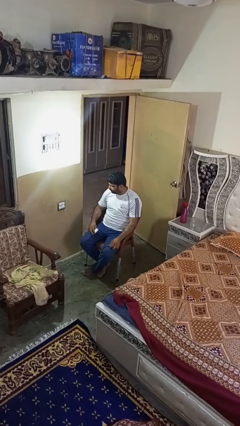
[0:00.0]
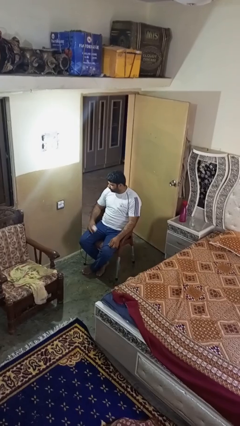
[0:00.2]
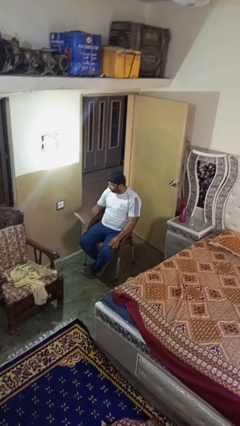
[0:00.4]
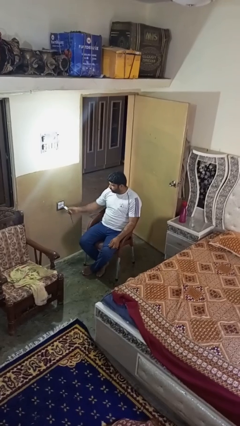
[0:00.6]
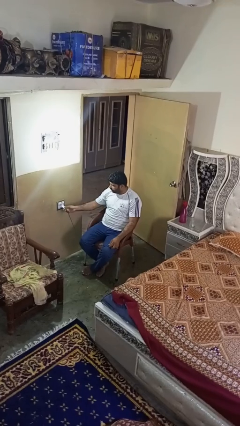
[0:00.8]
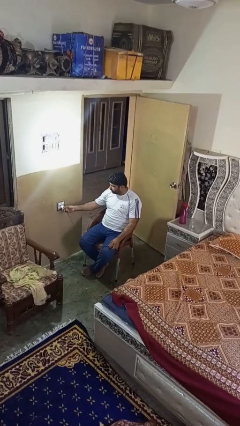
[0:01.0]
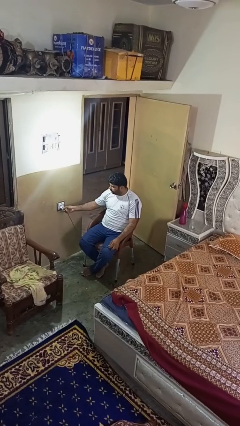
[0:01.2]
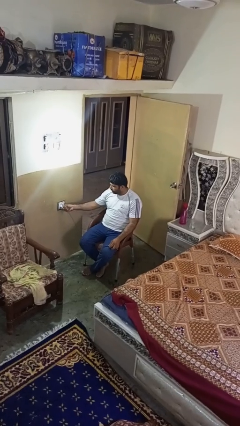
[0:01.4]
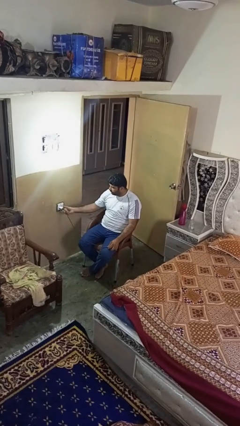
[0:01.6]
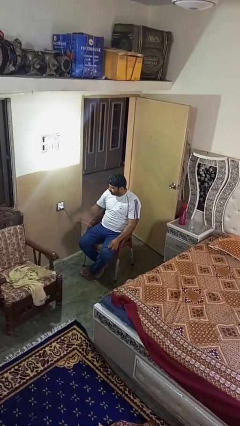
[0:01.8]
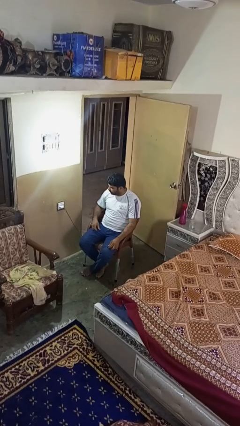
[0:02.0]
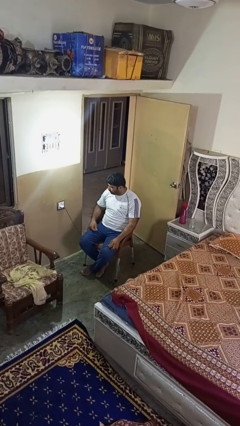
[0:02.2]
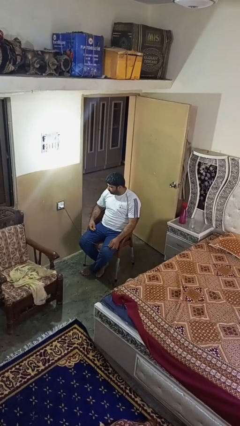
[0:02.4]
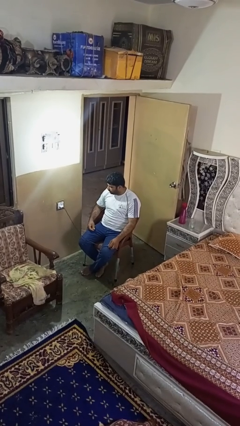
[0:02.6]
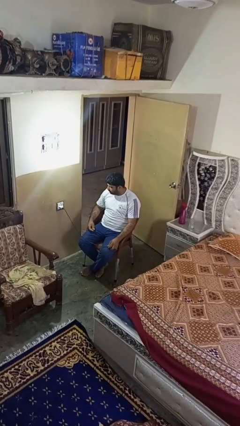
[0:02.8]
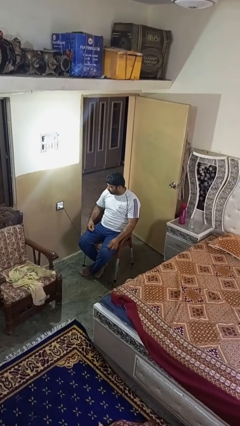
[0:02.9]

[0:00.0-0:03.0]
person plugs into electrical socket

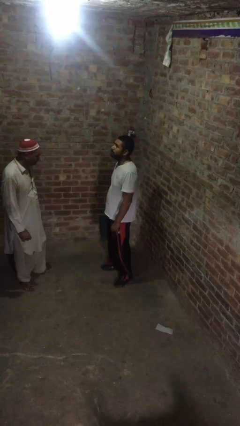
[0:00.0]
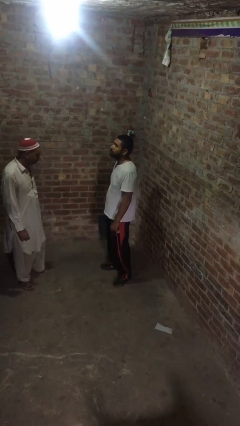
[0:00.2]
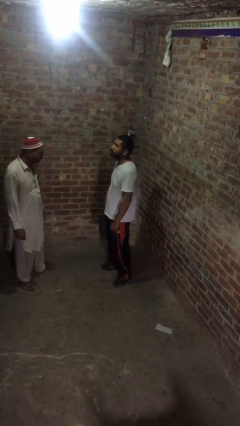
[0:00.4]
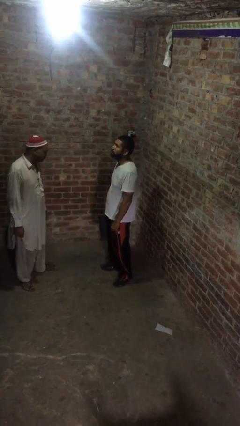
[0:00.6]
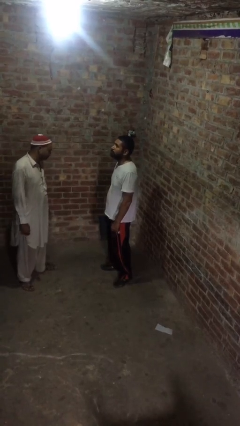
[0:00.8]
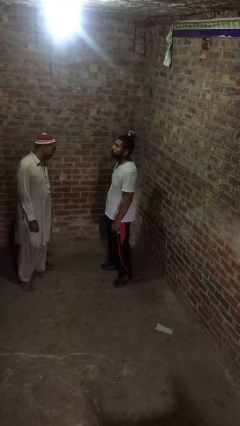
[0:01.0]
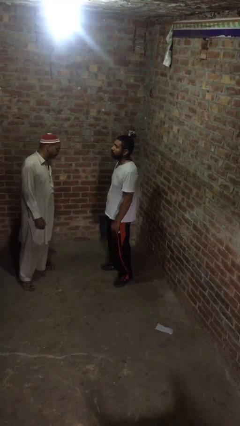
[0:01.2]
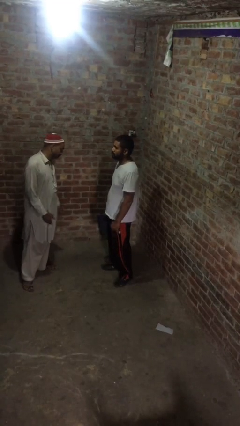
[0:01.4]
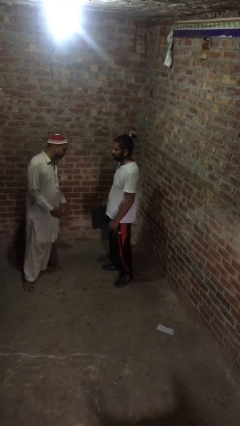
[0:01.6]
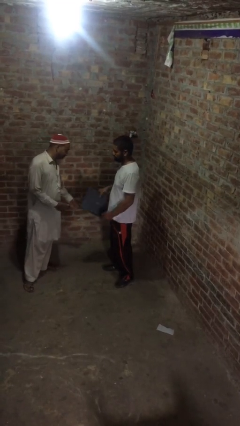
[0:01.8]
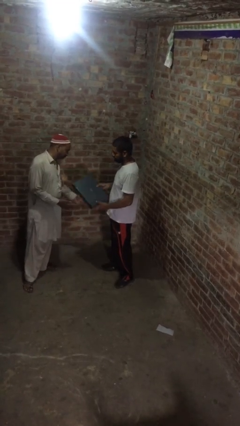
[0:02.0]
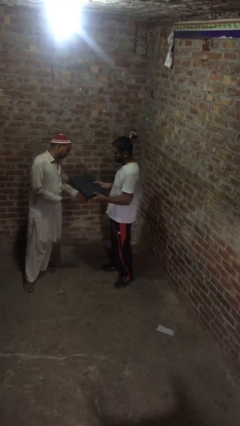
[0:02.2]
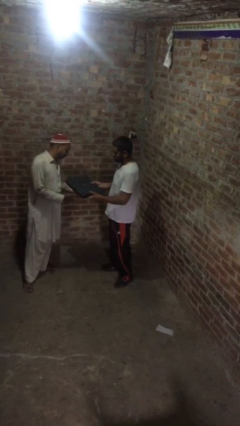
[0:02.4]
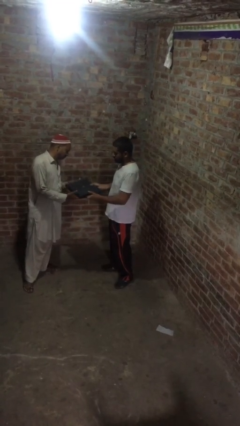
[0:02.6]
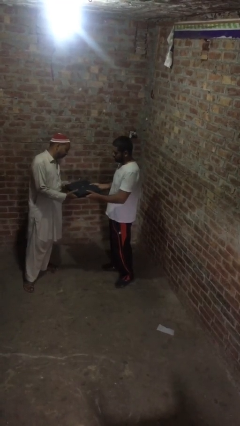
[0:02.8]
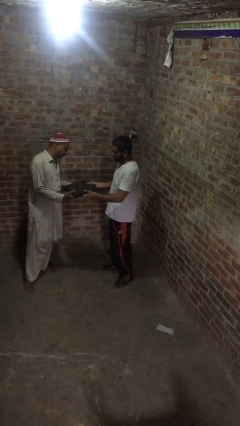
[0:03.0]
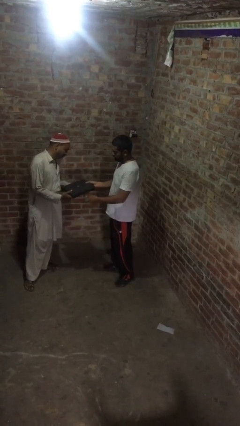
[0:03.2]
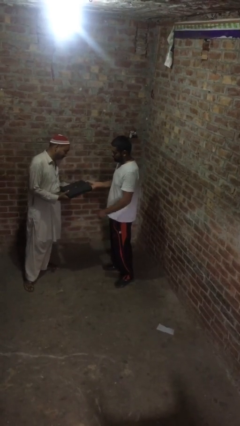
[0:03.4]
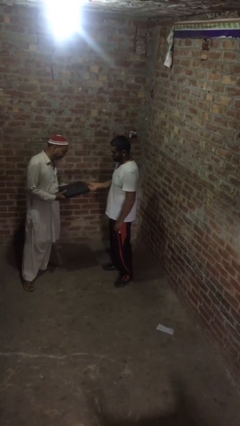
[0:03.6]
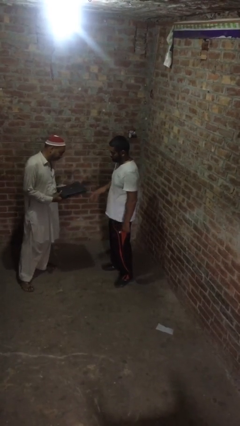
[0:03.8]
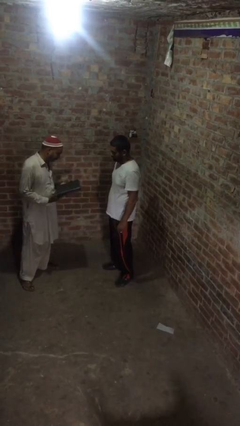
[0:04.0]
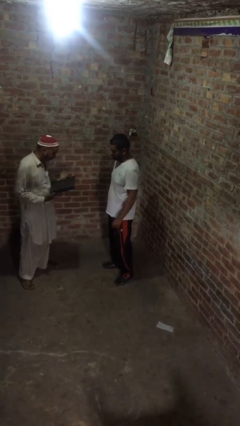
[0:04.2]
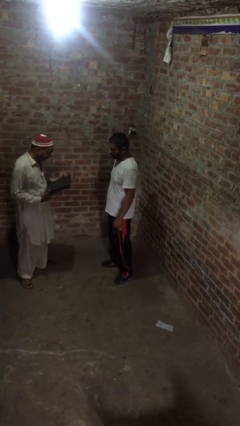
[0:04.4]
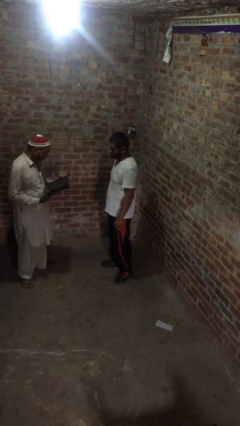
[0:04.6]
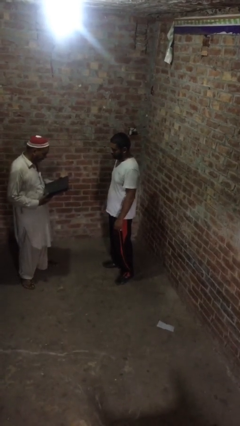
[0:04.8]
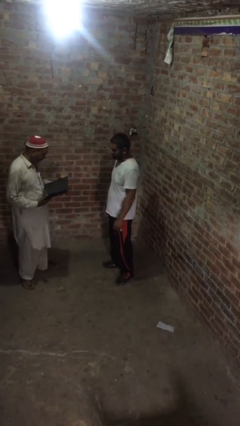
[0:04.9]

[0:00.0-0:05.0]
person transfers object to person

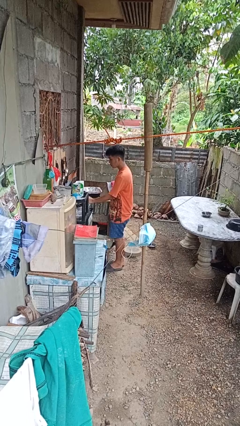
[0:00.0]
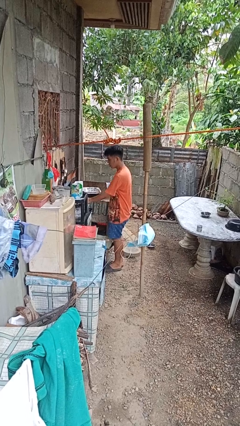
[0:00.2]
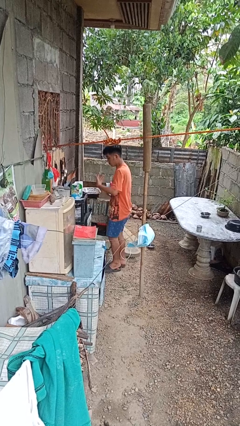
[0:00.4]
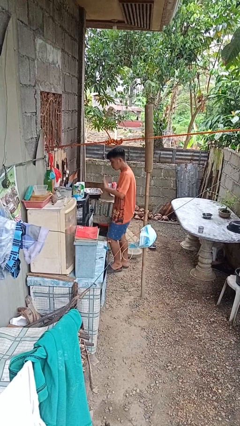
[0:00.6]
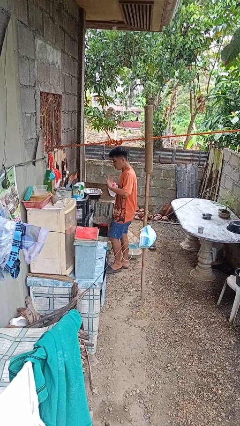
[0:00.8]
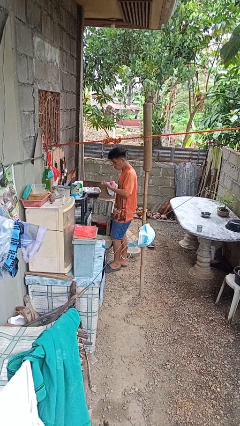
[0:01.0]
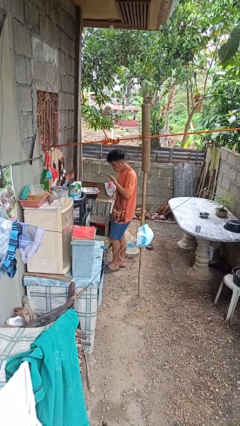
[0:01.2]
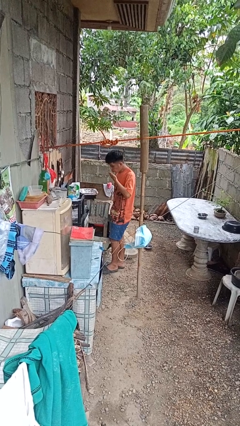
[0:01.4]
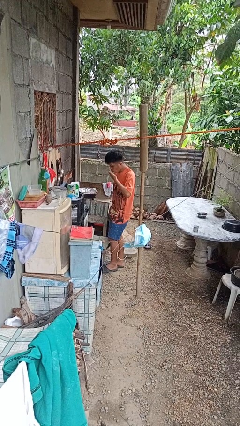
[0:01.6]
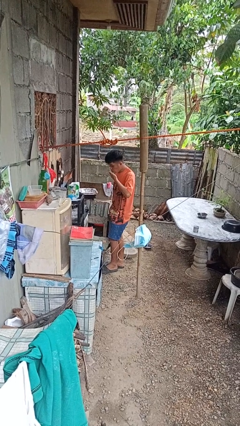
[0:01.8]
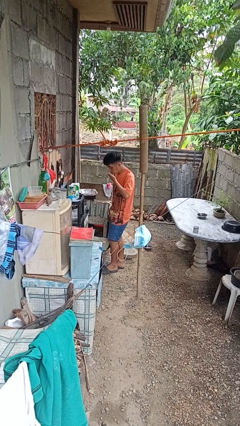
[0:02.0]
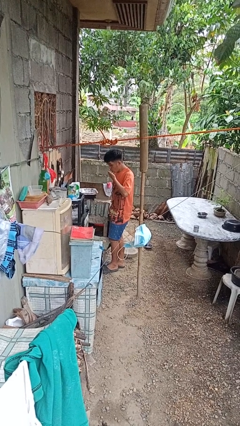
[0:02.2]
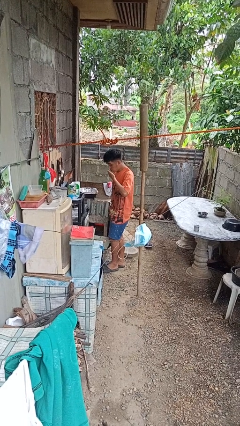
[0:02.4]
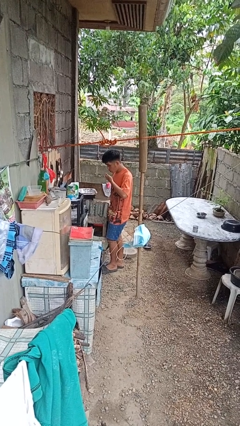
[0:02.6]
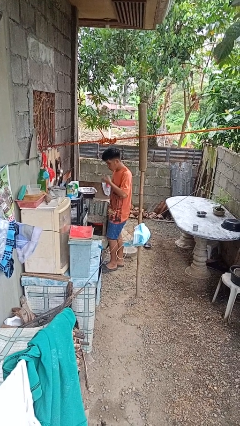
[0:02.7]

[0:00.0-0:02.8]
person burns hand

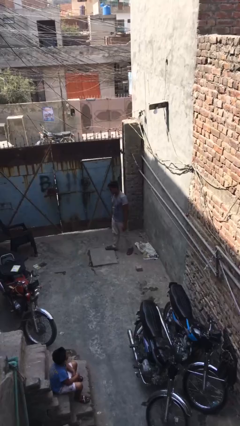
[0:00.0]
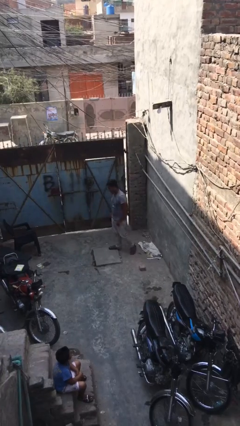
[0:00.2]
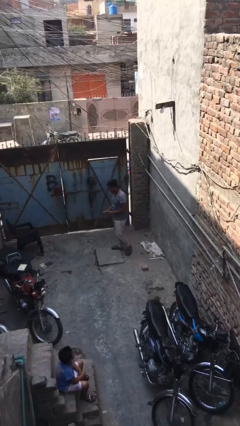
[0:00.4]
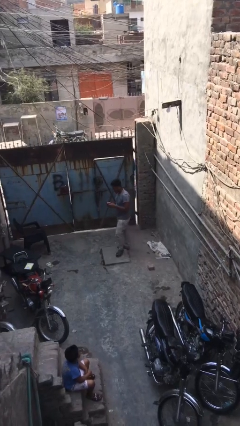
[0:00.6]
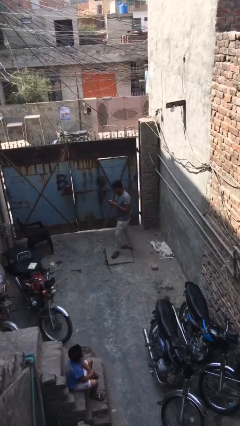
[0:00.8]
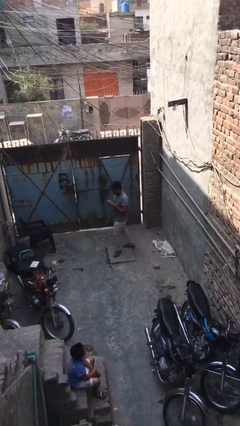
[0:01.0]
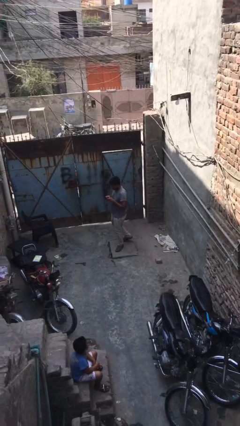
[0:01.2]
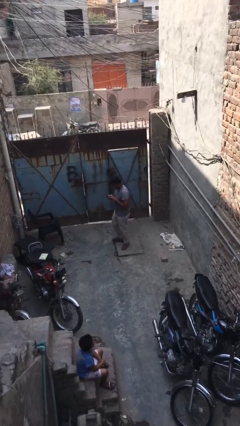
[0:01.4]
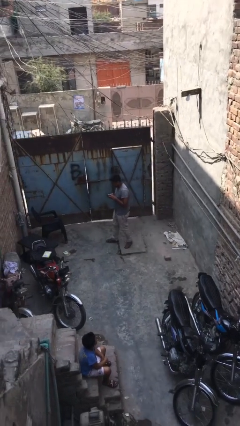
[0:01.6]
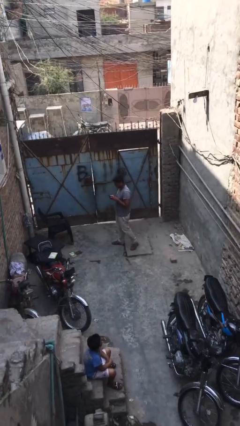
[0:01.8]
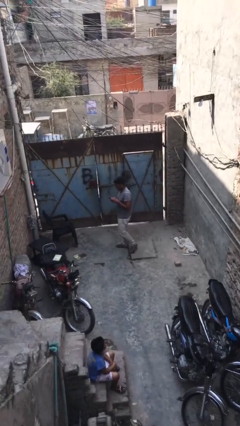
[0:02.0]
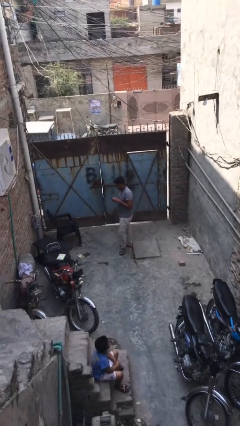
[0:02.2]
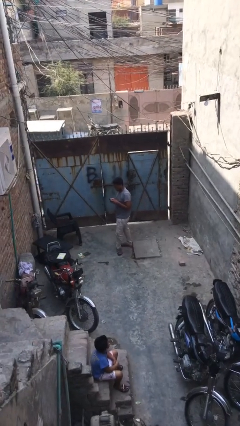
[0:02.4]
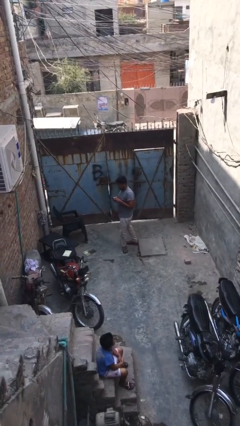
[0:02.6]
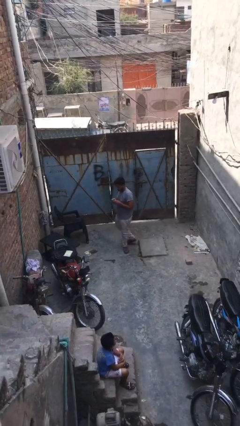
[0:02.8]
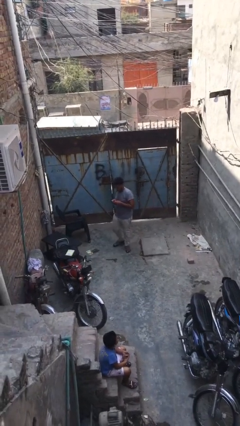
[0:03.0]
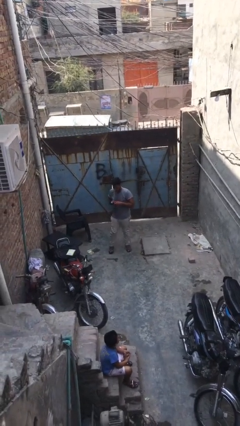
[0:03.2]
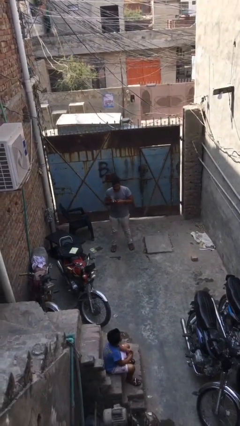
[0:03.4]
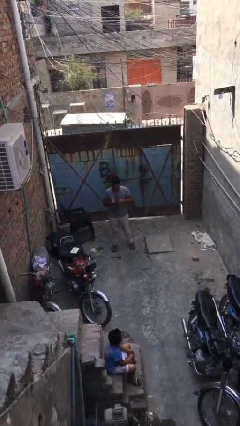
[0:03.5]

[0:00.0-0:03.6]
person texts on phone

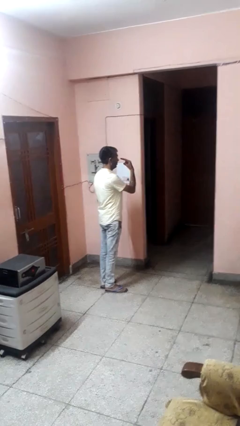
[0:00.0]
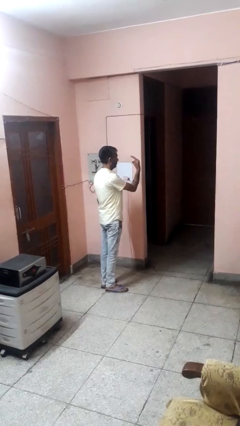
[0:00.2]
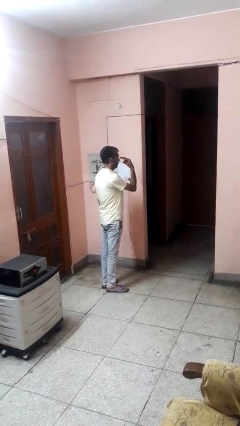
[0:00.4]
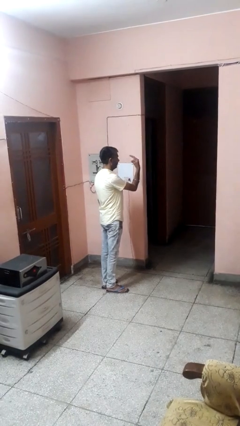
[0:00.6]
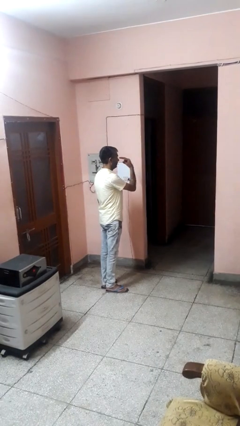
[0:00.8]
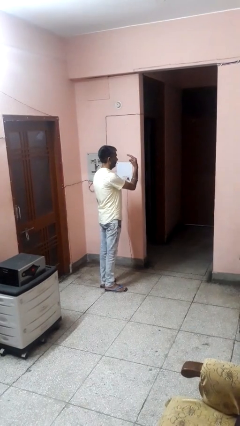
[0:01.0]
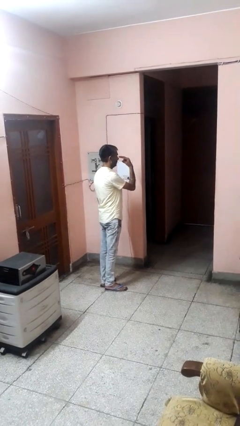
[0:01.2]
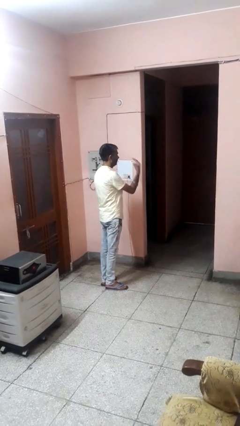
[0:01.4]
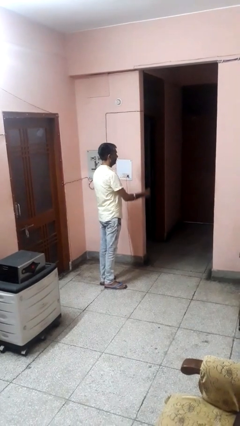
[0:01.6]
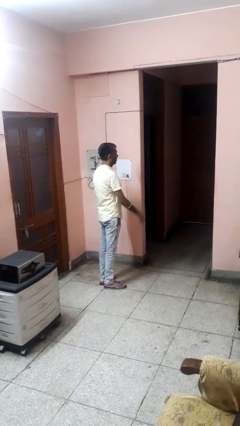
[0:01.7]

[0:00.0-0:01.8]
person gestures watch closely

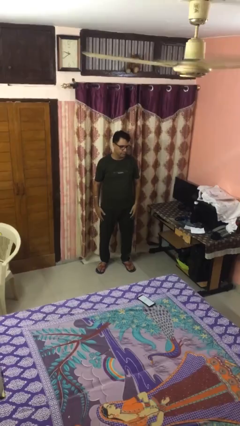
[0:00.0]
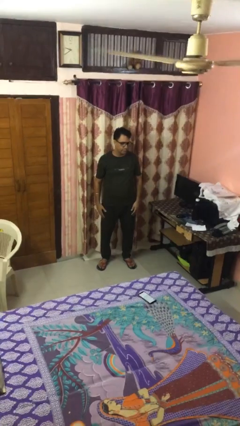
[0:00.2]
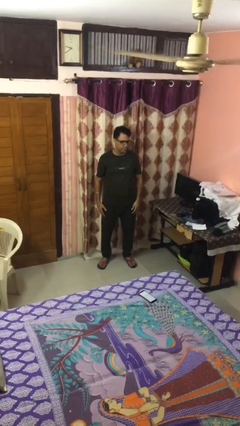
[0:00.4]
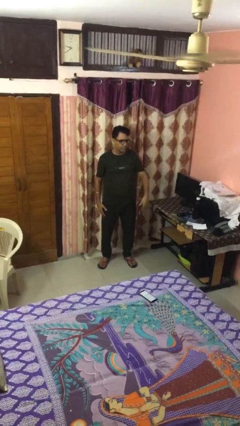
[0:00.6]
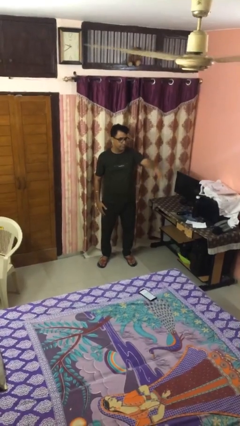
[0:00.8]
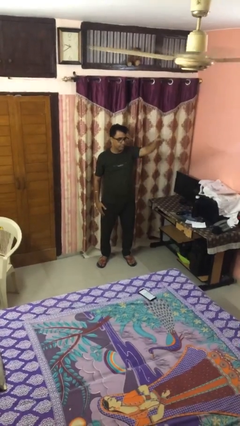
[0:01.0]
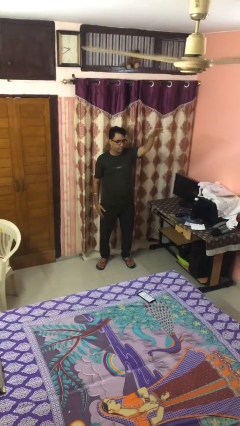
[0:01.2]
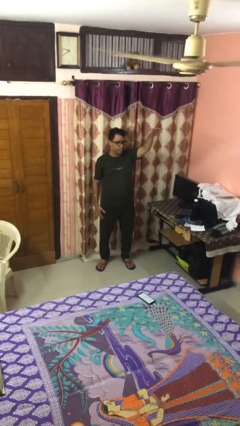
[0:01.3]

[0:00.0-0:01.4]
person gestures swipe up
